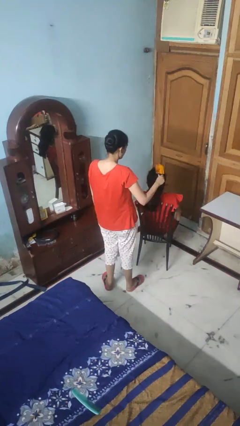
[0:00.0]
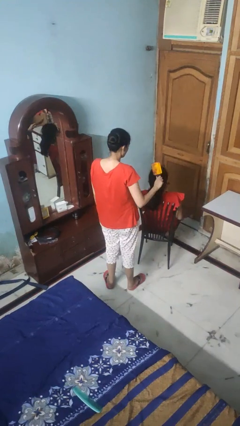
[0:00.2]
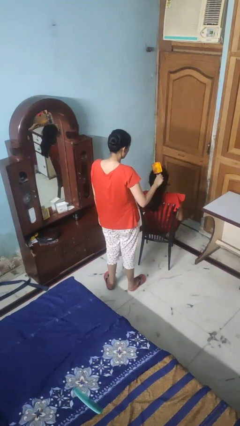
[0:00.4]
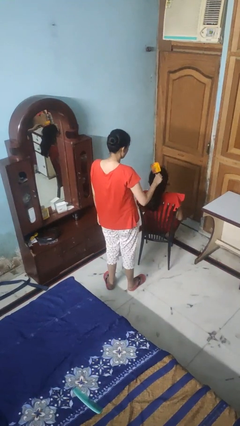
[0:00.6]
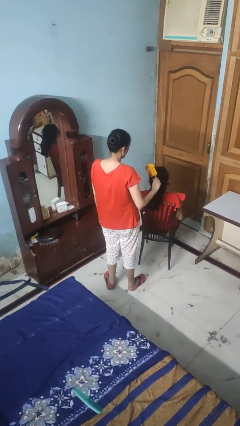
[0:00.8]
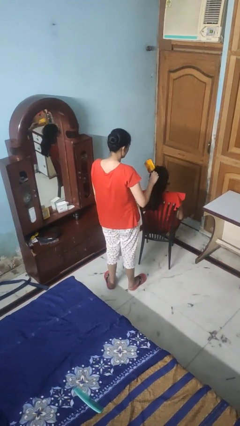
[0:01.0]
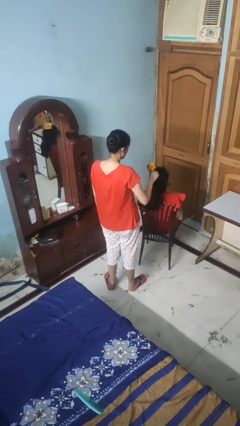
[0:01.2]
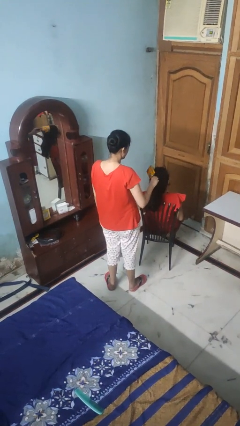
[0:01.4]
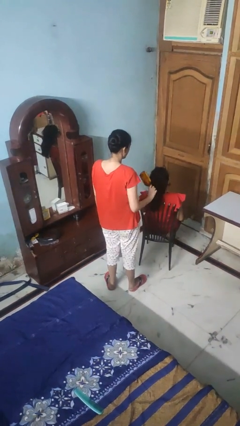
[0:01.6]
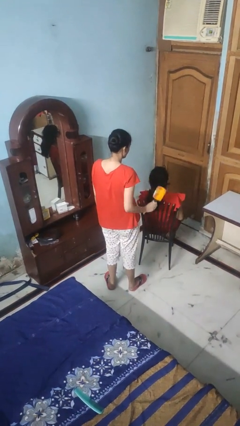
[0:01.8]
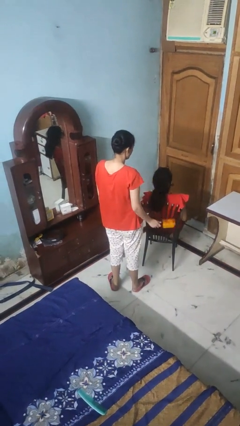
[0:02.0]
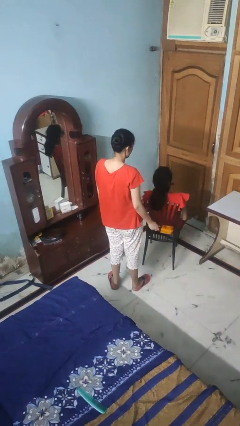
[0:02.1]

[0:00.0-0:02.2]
person brushes hair of person

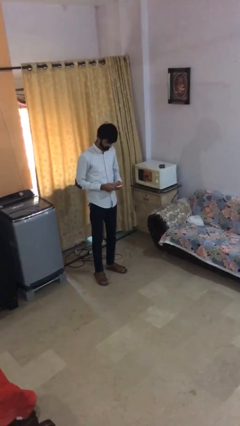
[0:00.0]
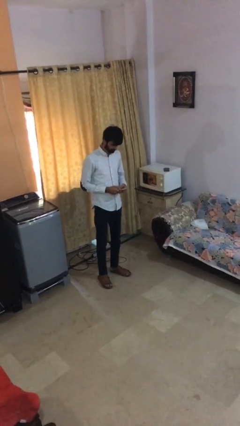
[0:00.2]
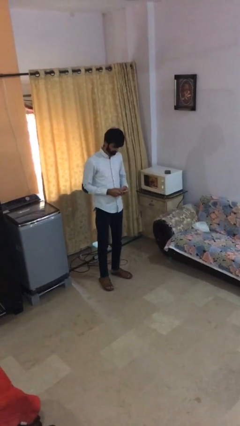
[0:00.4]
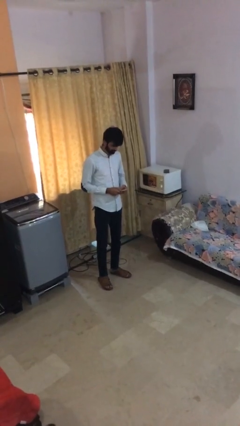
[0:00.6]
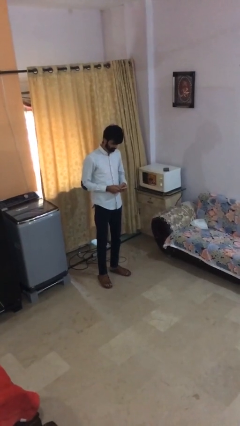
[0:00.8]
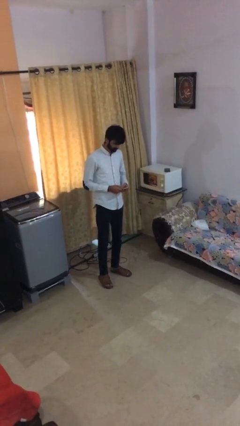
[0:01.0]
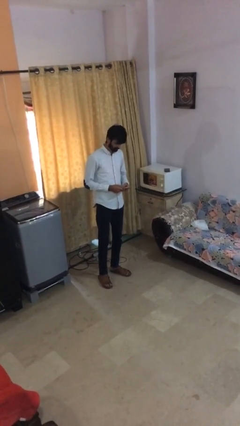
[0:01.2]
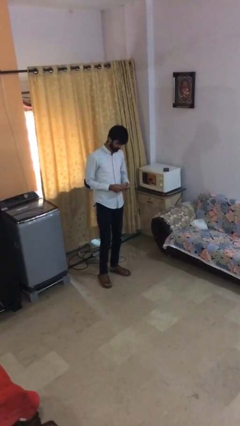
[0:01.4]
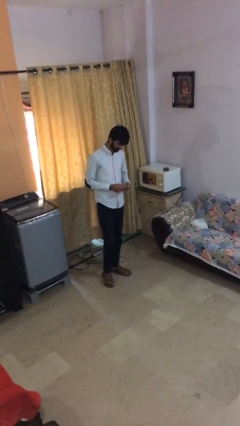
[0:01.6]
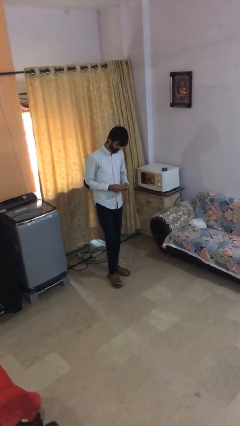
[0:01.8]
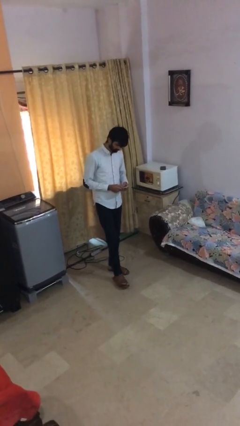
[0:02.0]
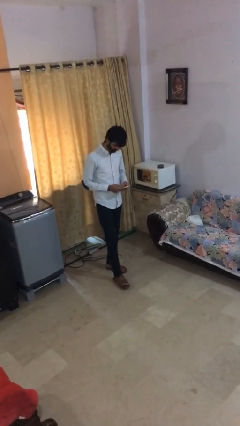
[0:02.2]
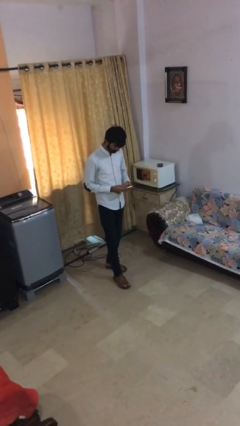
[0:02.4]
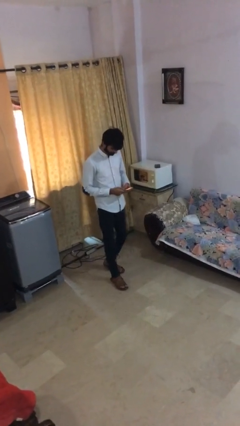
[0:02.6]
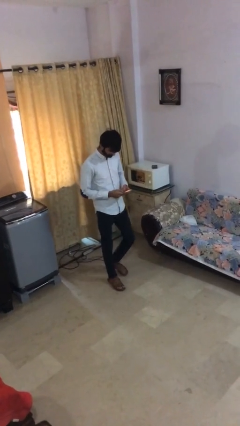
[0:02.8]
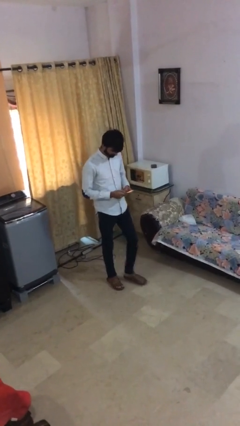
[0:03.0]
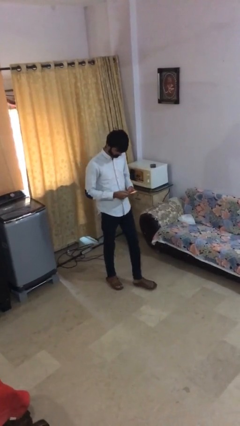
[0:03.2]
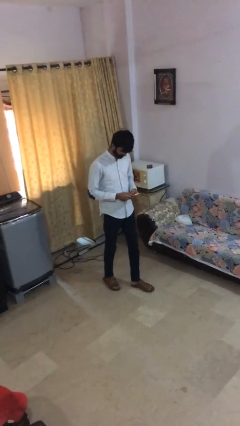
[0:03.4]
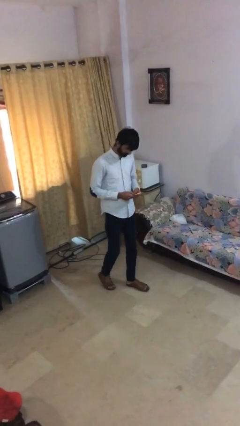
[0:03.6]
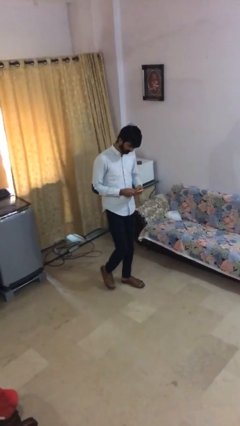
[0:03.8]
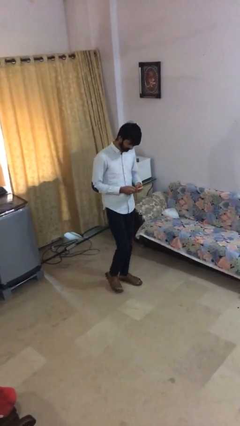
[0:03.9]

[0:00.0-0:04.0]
person texts on phone

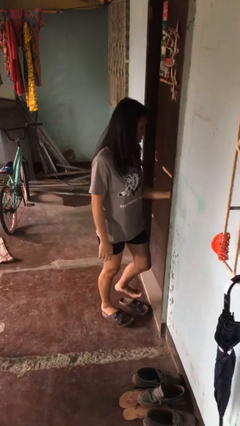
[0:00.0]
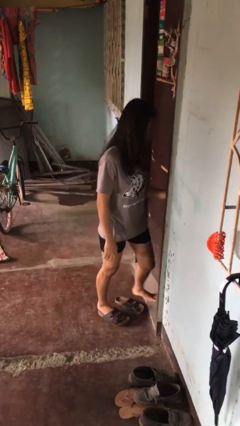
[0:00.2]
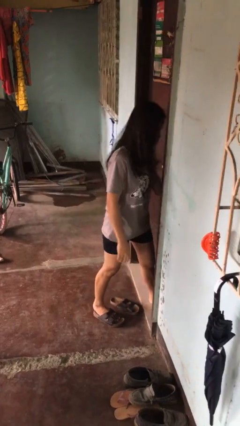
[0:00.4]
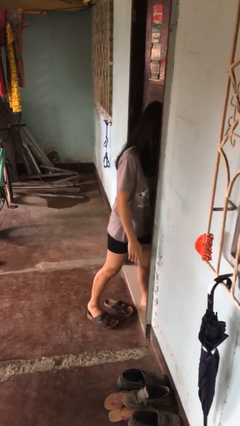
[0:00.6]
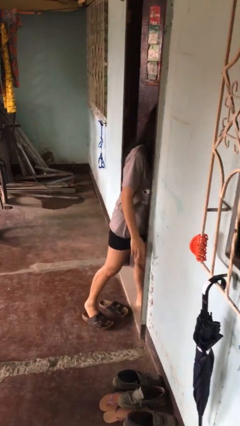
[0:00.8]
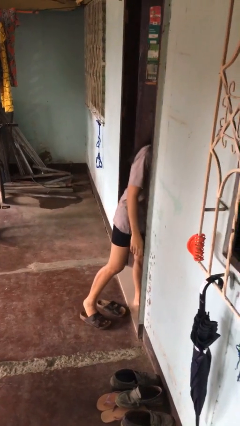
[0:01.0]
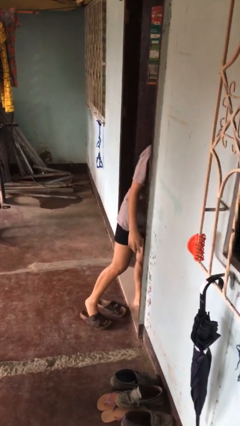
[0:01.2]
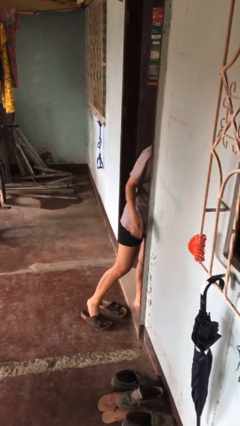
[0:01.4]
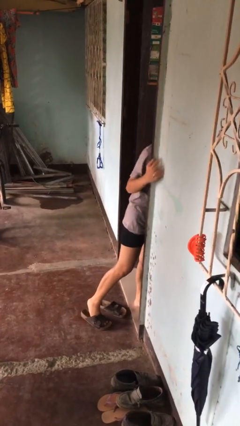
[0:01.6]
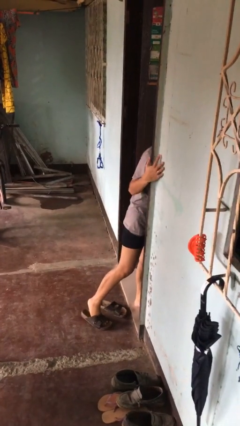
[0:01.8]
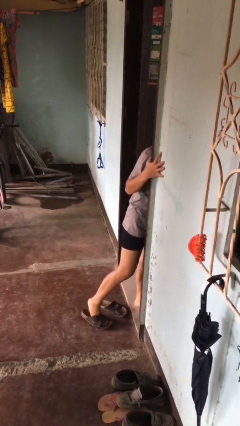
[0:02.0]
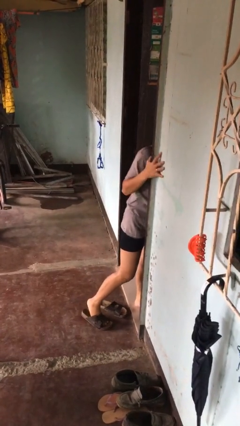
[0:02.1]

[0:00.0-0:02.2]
person opens facility door

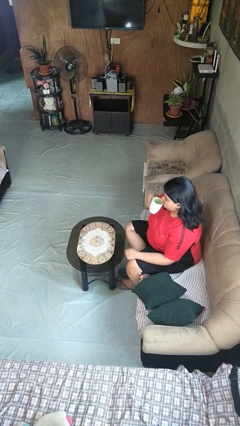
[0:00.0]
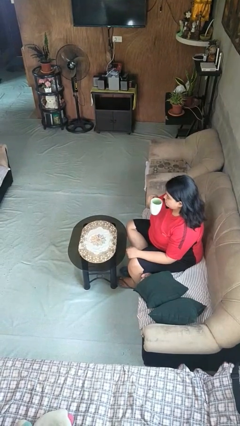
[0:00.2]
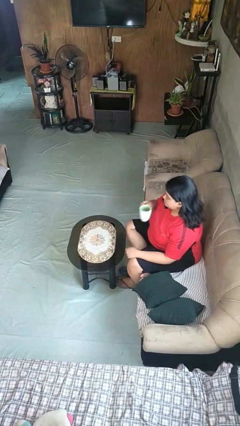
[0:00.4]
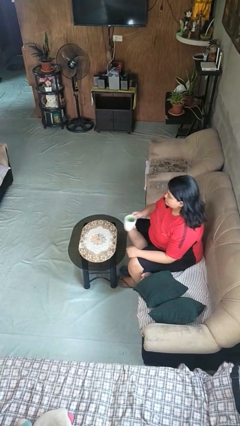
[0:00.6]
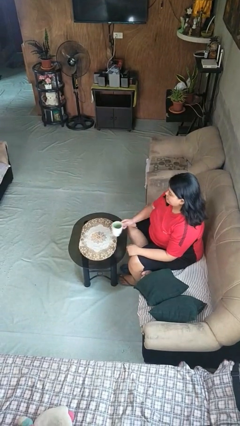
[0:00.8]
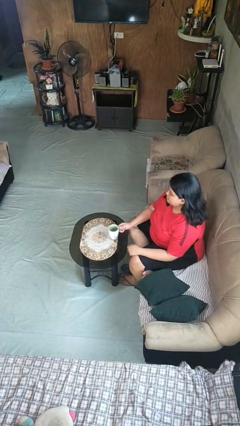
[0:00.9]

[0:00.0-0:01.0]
person puts down object on table

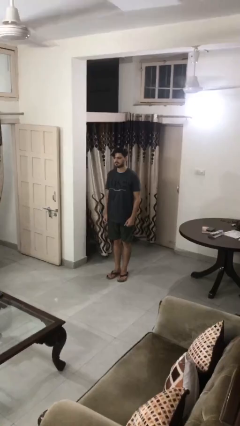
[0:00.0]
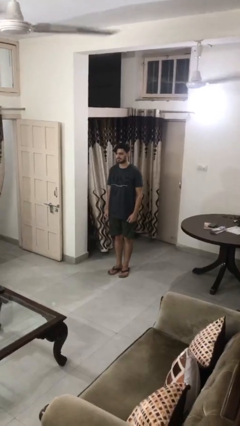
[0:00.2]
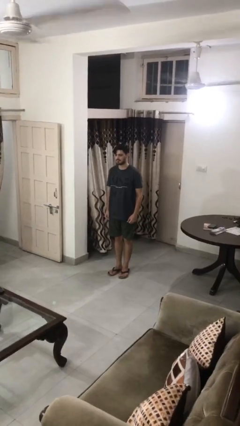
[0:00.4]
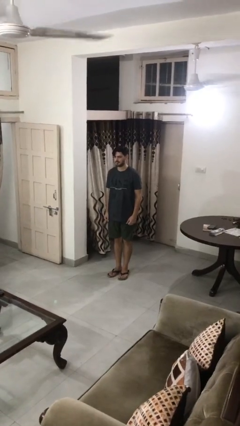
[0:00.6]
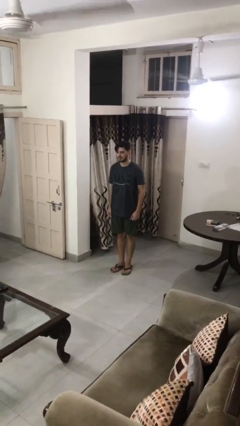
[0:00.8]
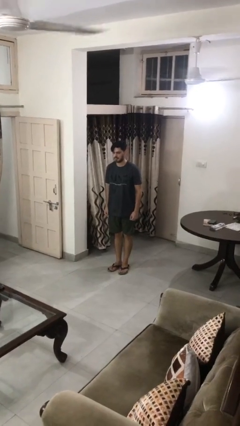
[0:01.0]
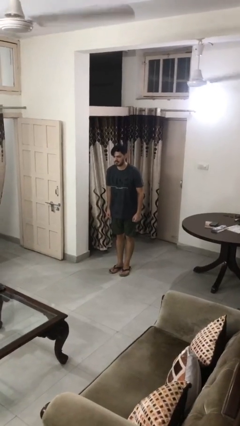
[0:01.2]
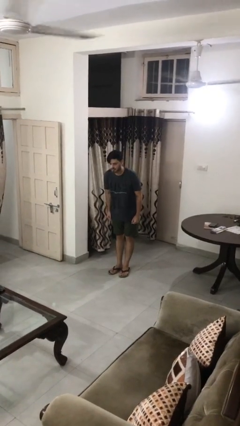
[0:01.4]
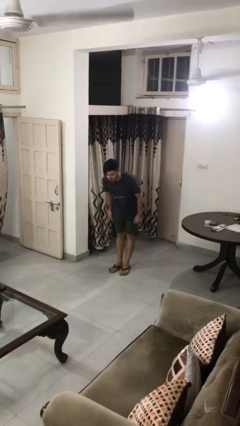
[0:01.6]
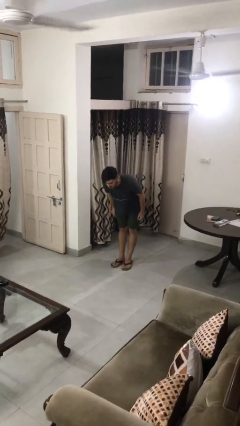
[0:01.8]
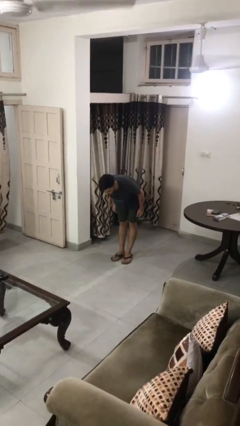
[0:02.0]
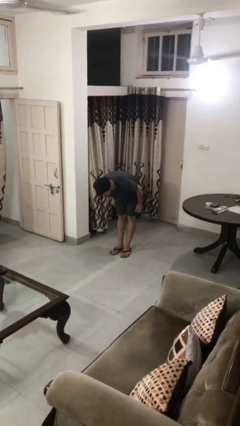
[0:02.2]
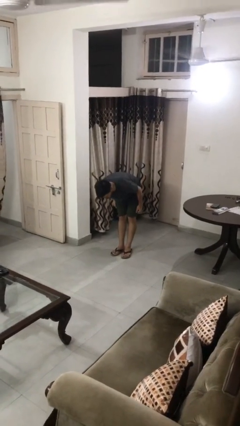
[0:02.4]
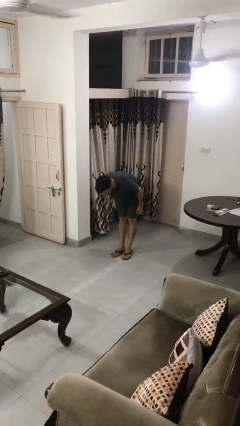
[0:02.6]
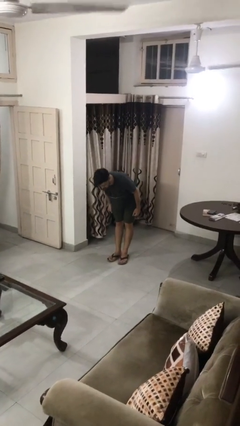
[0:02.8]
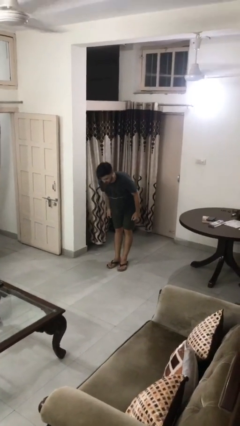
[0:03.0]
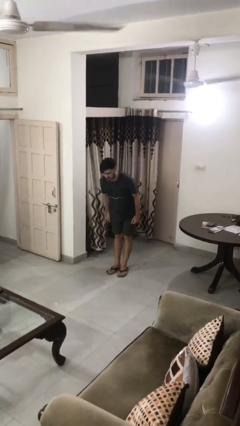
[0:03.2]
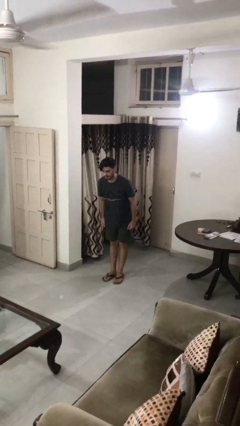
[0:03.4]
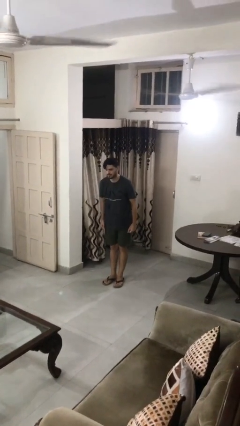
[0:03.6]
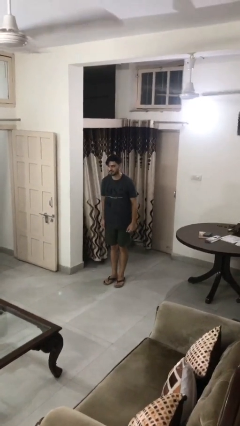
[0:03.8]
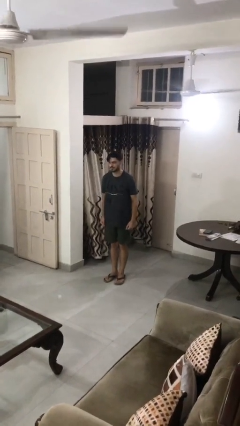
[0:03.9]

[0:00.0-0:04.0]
person bows

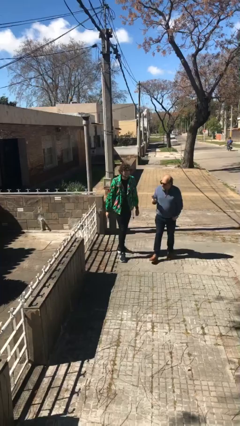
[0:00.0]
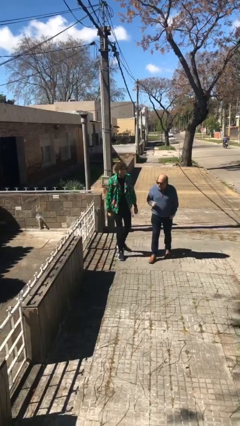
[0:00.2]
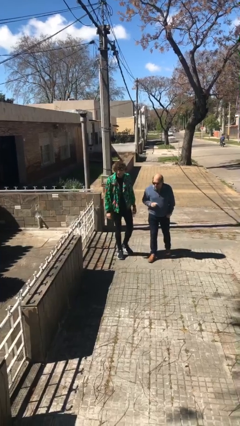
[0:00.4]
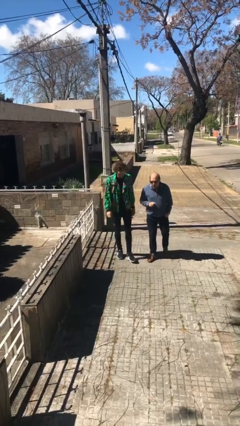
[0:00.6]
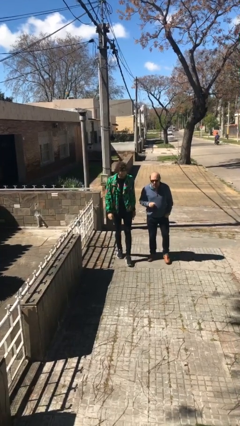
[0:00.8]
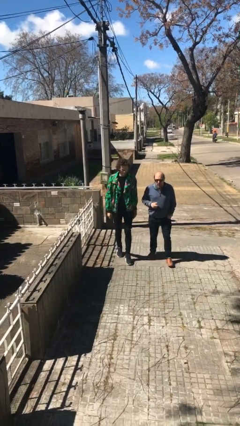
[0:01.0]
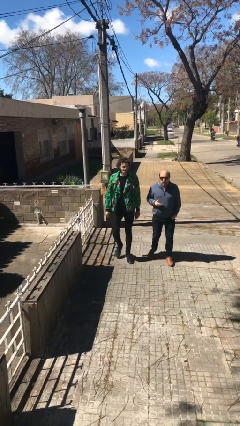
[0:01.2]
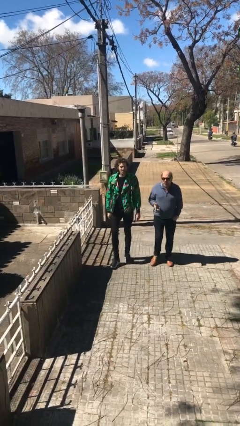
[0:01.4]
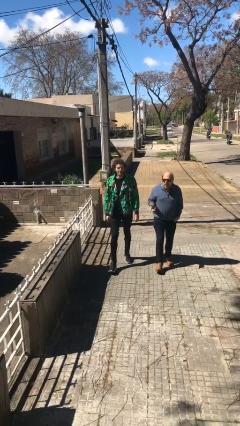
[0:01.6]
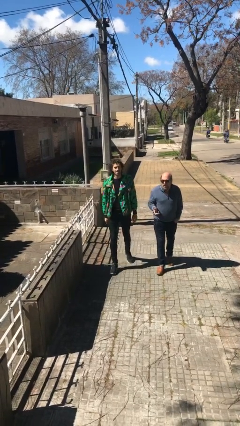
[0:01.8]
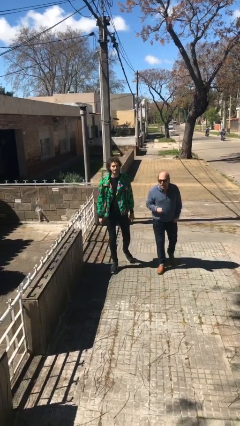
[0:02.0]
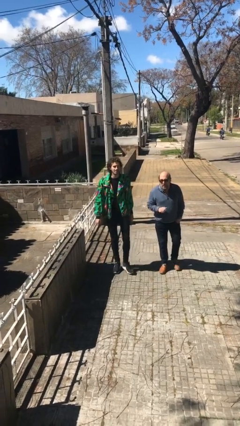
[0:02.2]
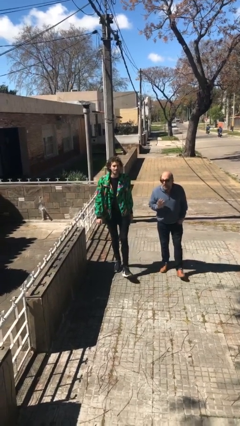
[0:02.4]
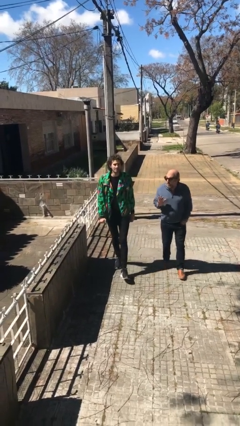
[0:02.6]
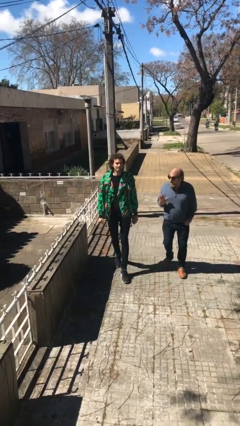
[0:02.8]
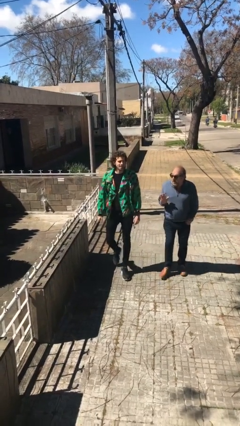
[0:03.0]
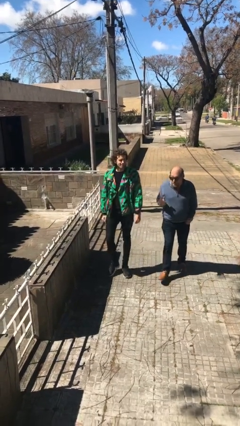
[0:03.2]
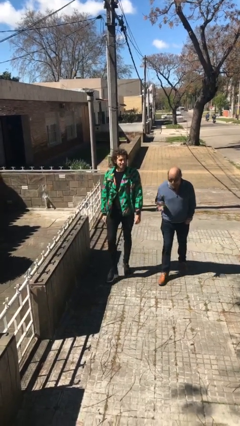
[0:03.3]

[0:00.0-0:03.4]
person talks to person

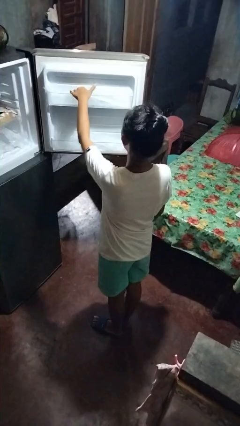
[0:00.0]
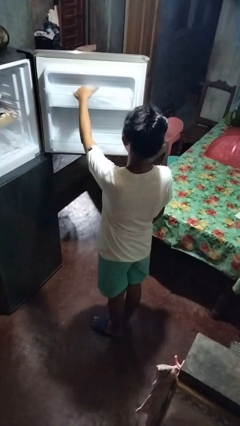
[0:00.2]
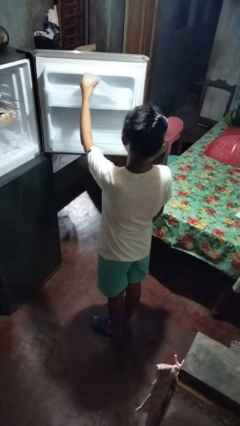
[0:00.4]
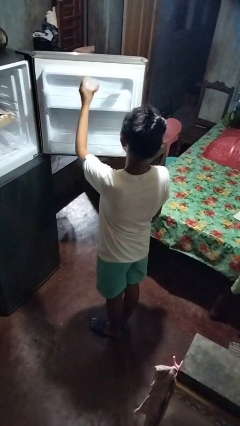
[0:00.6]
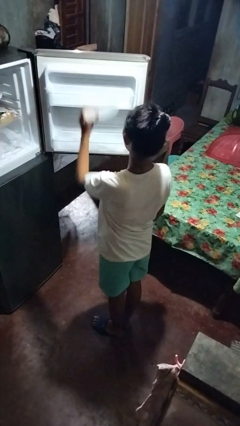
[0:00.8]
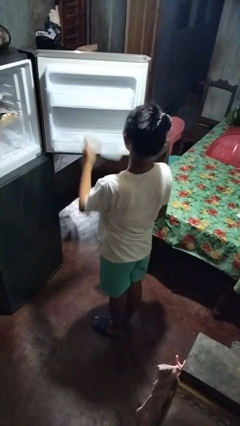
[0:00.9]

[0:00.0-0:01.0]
person takes object from refrigerator
